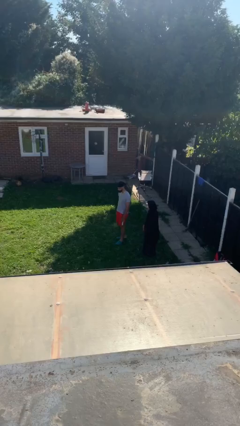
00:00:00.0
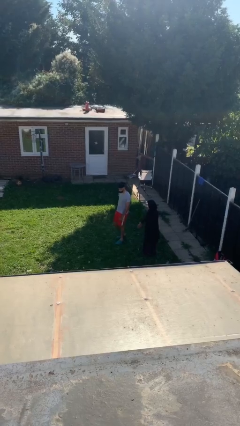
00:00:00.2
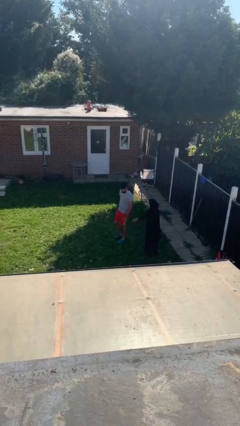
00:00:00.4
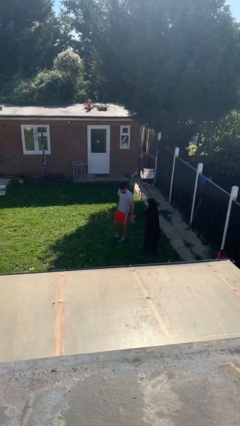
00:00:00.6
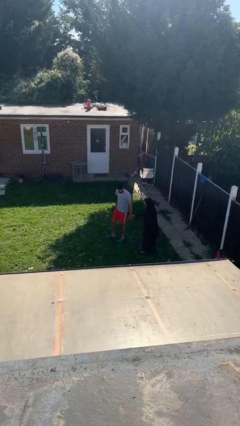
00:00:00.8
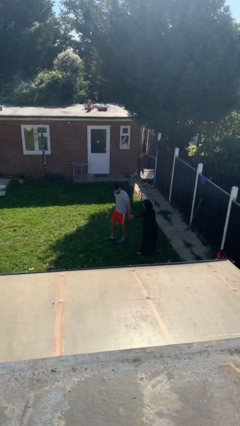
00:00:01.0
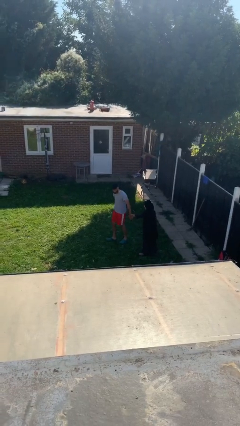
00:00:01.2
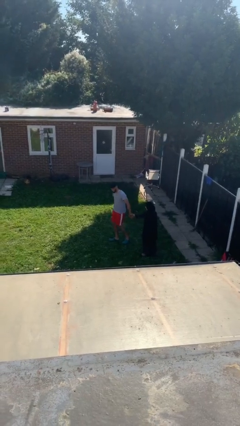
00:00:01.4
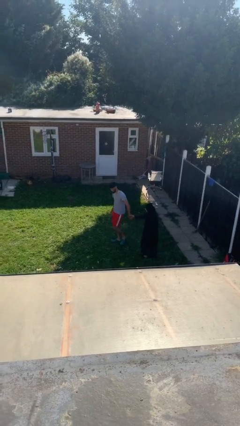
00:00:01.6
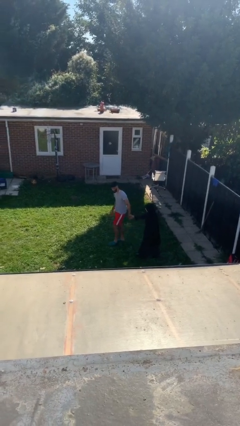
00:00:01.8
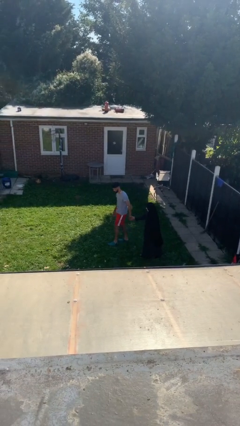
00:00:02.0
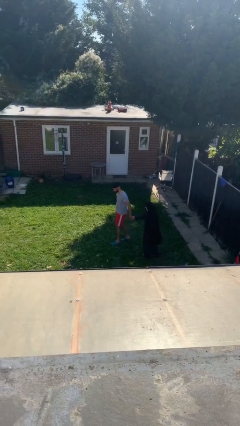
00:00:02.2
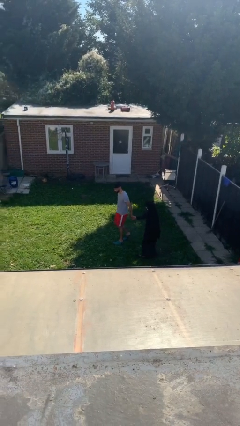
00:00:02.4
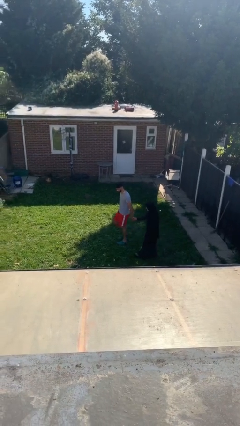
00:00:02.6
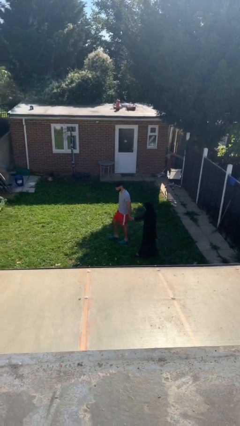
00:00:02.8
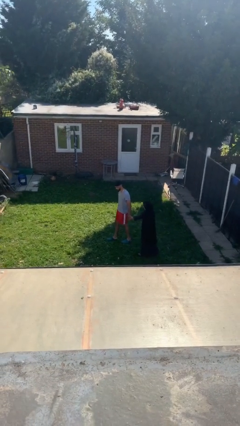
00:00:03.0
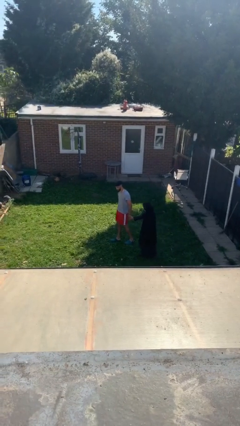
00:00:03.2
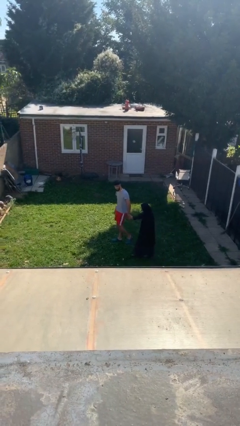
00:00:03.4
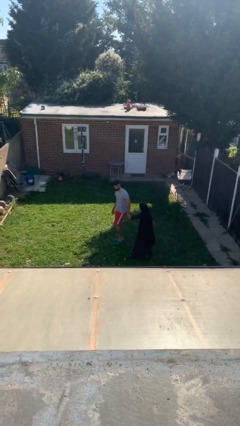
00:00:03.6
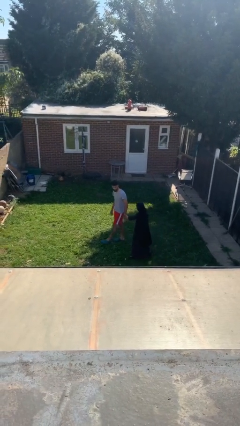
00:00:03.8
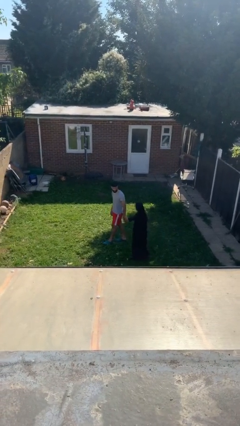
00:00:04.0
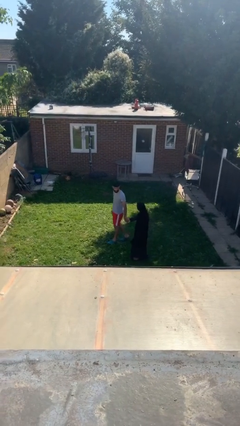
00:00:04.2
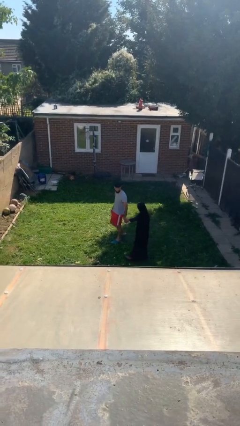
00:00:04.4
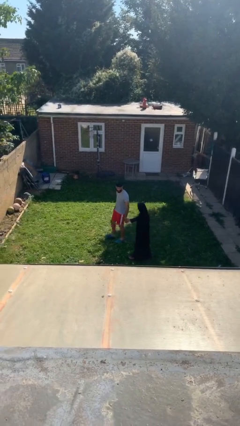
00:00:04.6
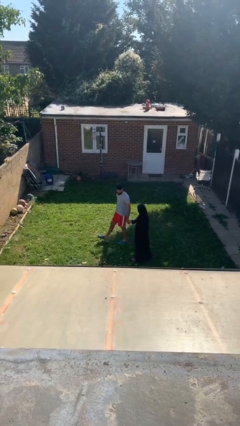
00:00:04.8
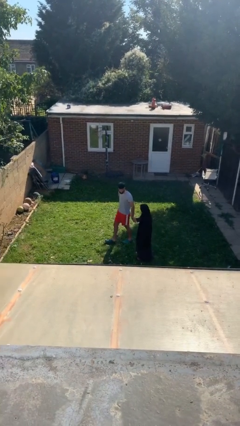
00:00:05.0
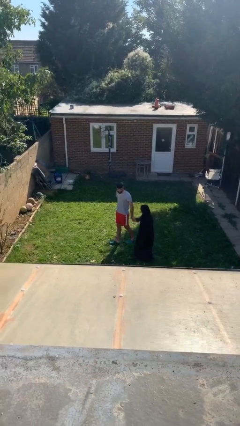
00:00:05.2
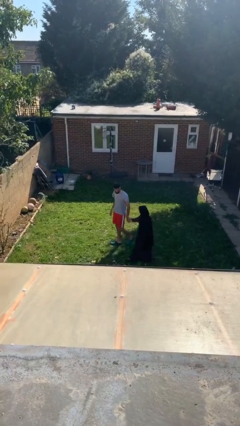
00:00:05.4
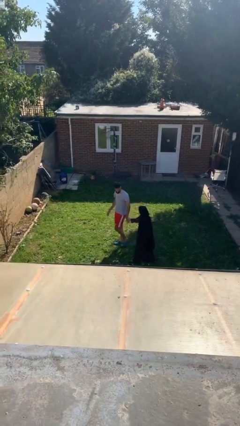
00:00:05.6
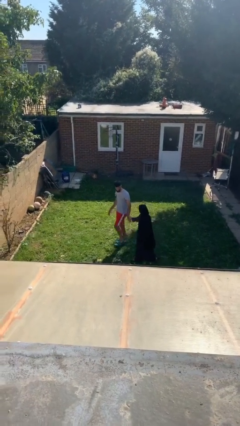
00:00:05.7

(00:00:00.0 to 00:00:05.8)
person holds hand

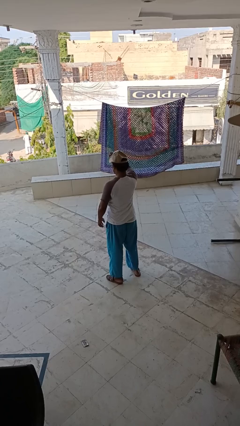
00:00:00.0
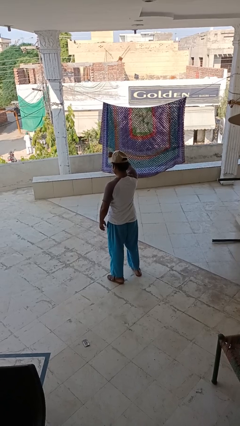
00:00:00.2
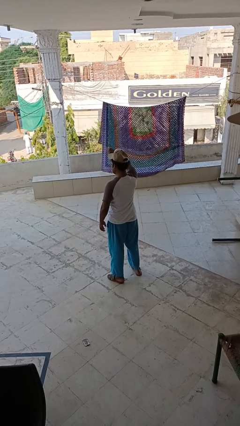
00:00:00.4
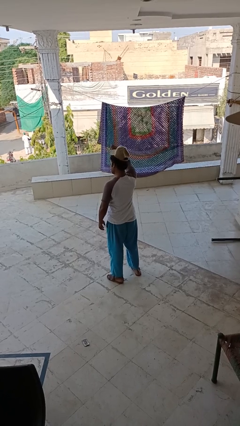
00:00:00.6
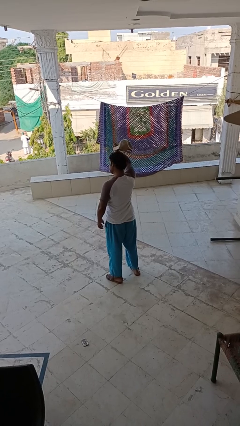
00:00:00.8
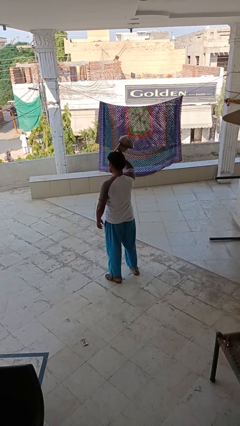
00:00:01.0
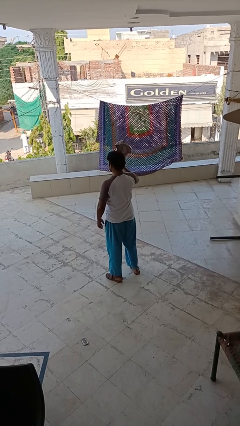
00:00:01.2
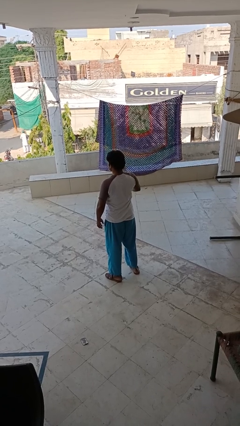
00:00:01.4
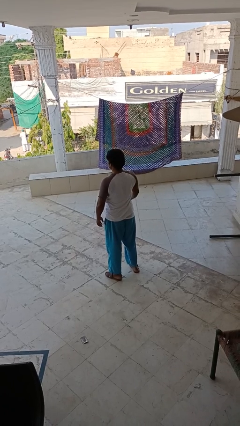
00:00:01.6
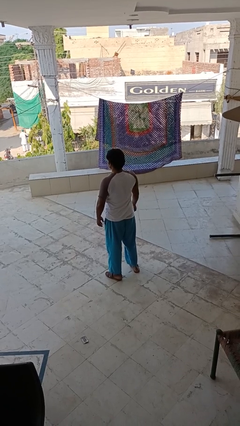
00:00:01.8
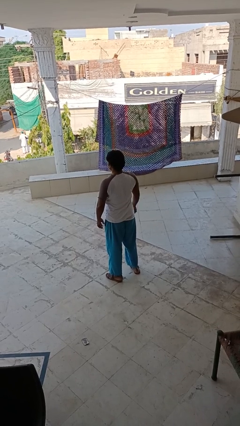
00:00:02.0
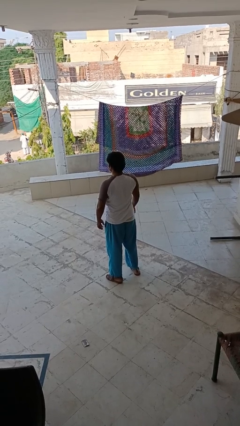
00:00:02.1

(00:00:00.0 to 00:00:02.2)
person takes off hat

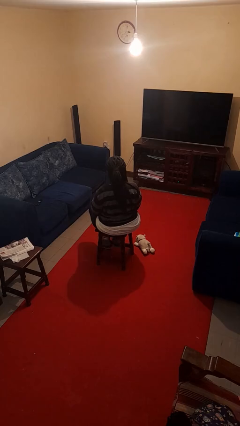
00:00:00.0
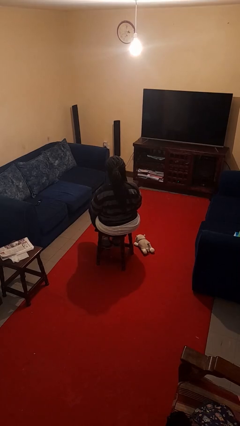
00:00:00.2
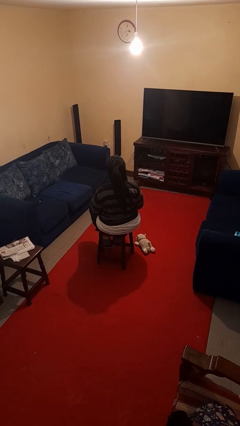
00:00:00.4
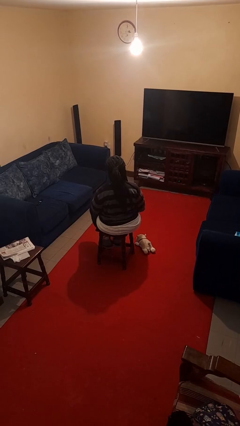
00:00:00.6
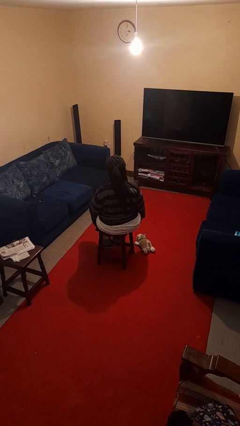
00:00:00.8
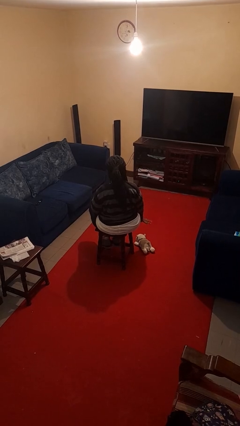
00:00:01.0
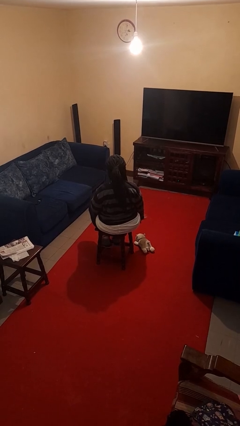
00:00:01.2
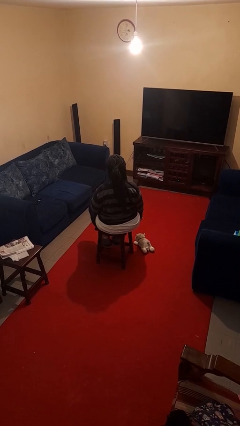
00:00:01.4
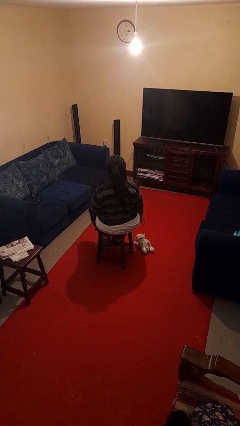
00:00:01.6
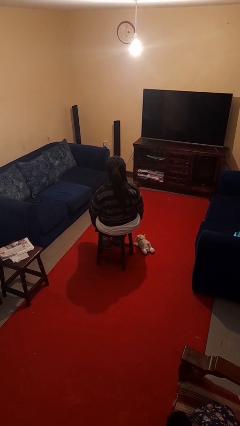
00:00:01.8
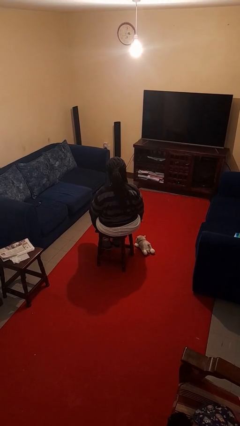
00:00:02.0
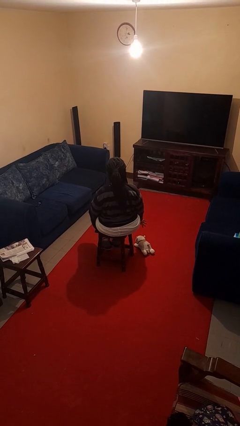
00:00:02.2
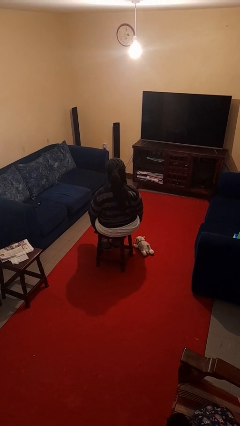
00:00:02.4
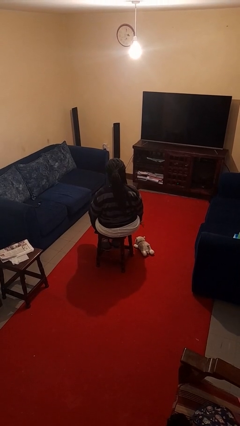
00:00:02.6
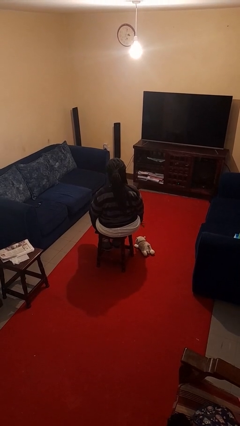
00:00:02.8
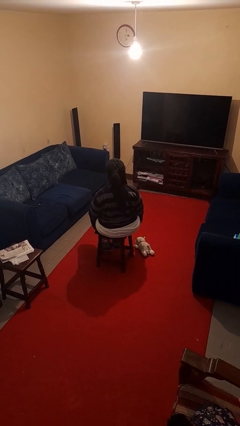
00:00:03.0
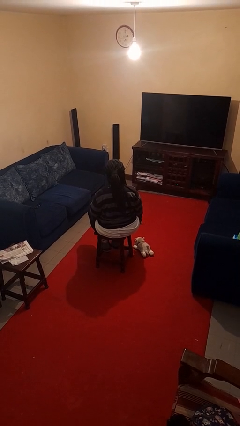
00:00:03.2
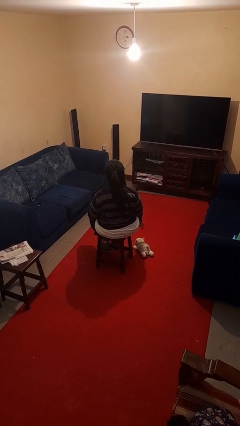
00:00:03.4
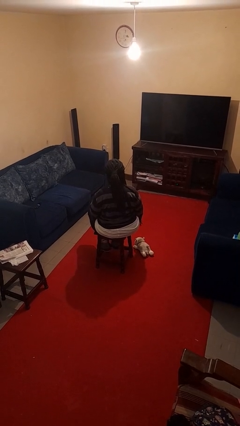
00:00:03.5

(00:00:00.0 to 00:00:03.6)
person waves hand over object

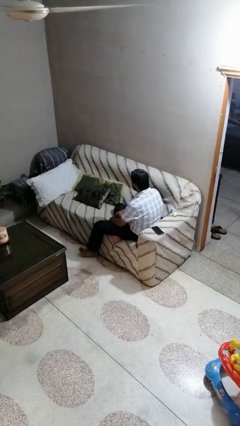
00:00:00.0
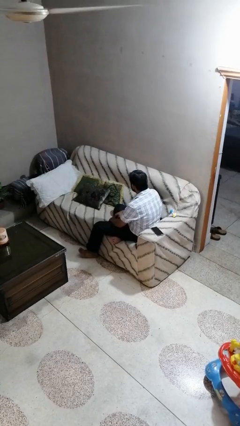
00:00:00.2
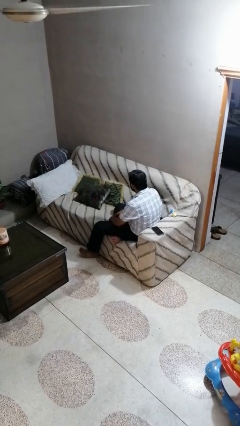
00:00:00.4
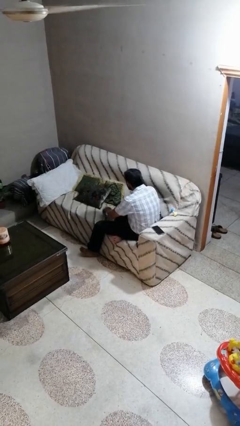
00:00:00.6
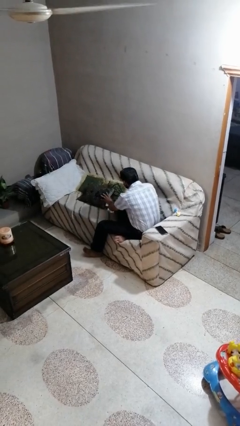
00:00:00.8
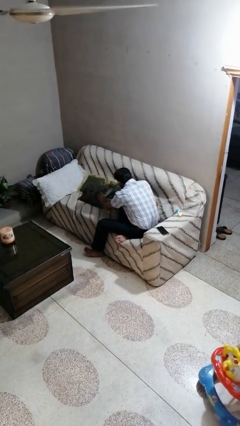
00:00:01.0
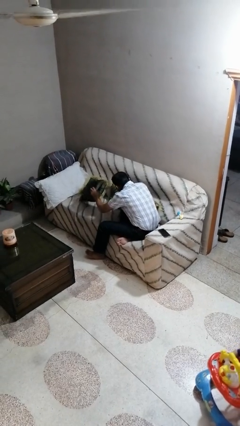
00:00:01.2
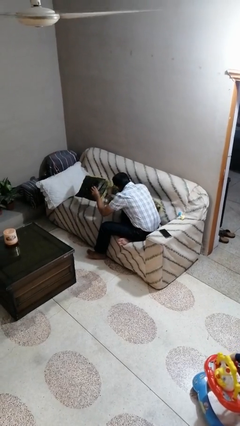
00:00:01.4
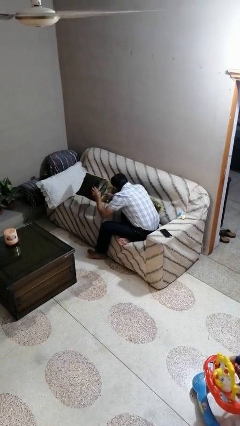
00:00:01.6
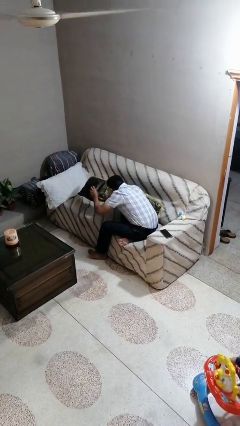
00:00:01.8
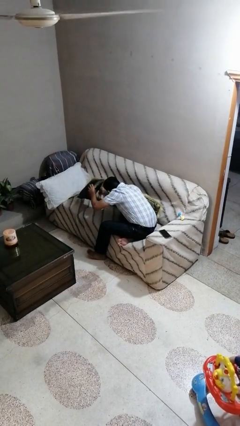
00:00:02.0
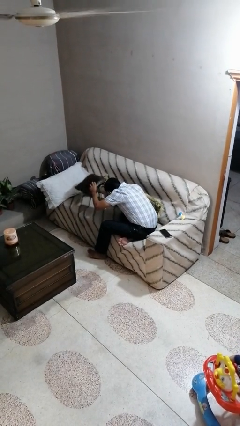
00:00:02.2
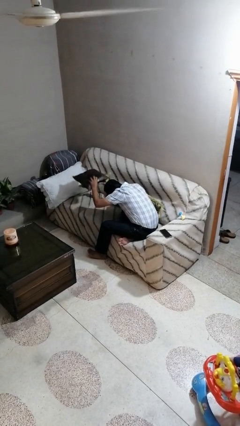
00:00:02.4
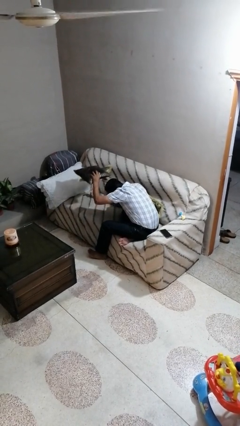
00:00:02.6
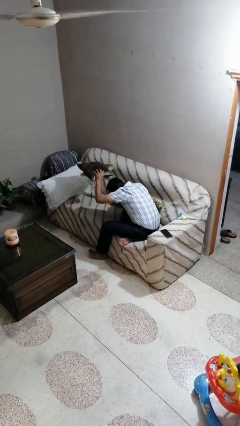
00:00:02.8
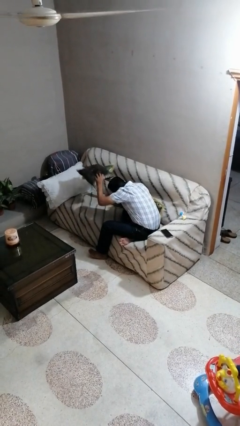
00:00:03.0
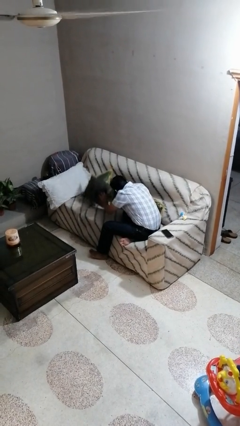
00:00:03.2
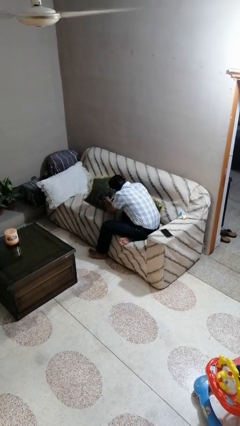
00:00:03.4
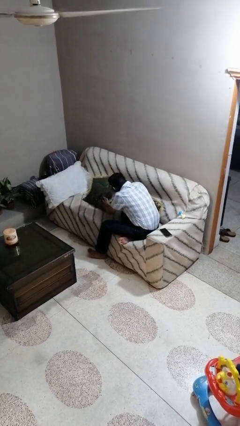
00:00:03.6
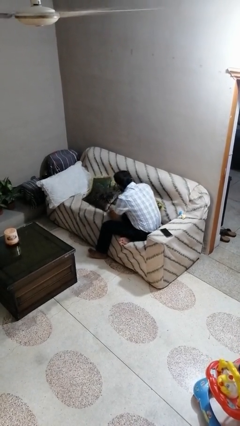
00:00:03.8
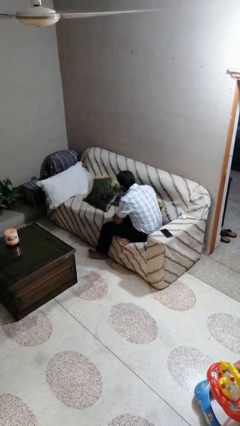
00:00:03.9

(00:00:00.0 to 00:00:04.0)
person searches in couch

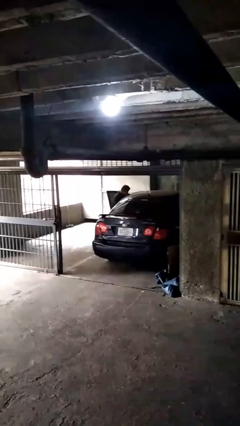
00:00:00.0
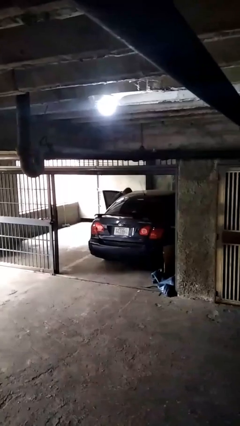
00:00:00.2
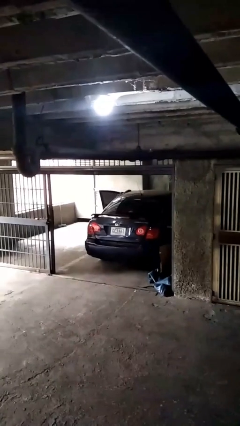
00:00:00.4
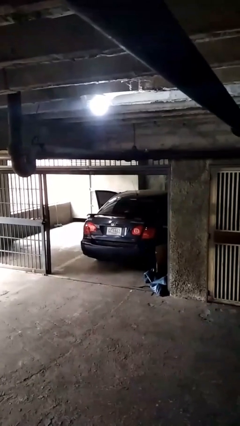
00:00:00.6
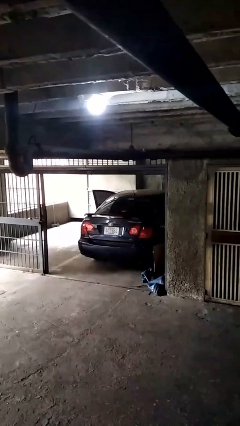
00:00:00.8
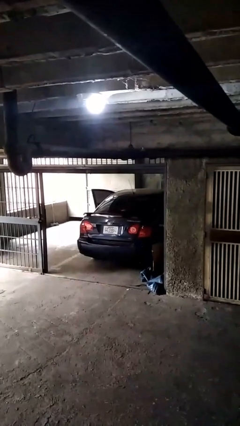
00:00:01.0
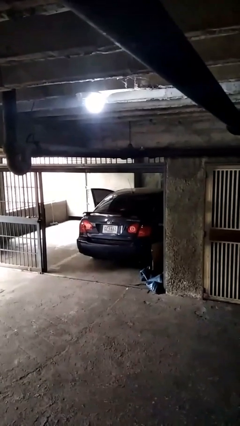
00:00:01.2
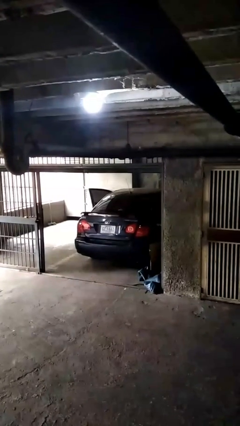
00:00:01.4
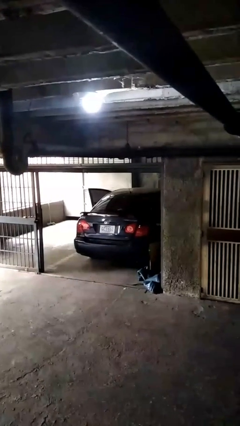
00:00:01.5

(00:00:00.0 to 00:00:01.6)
person enters car
